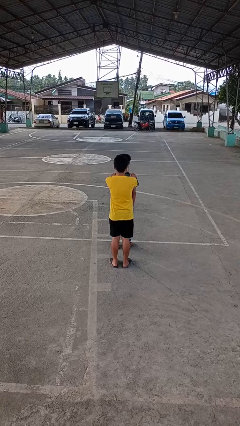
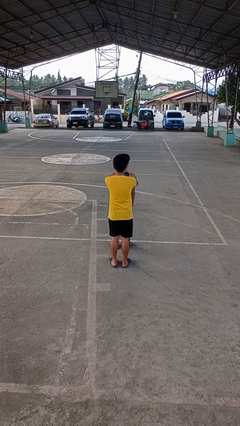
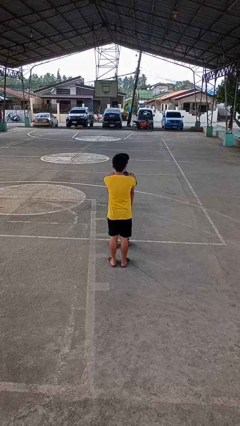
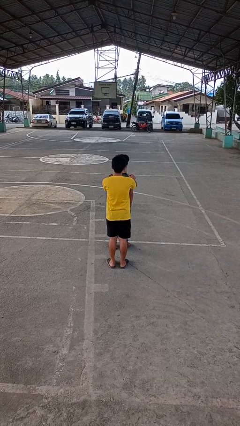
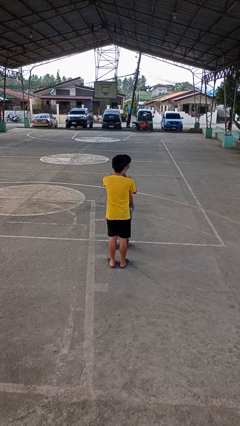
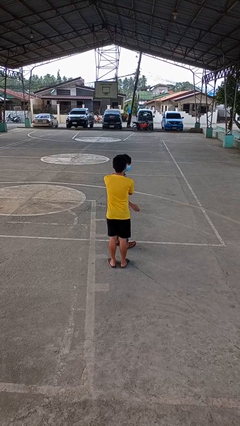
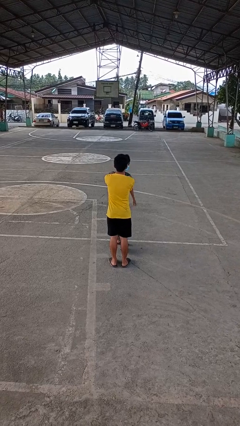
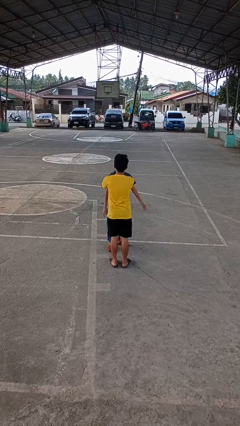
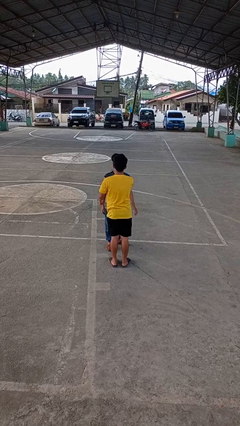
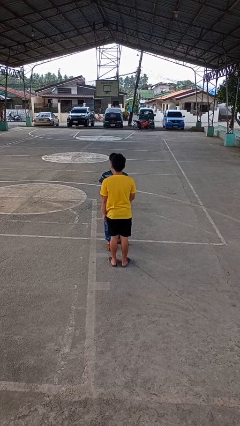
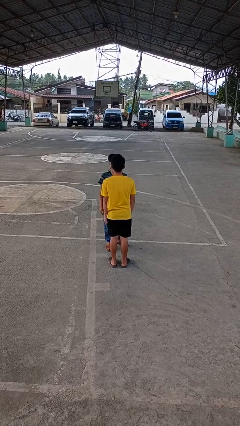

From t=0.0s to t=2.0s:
person spins person around

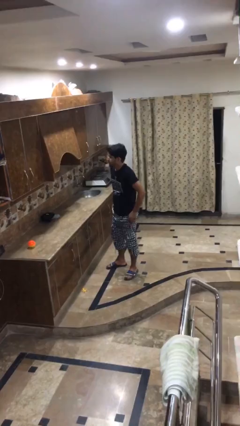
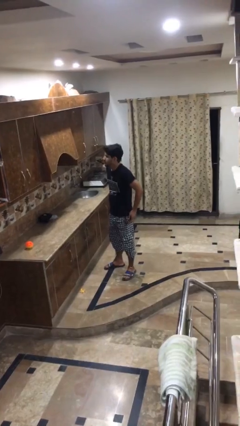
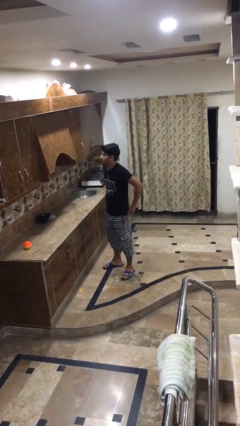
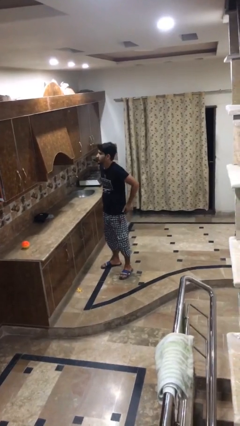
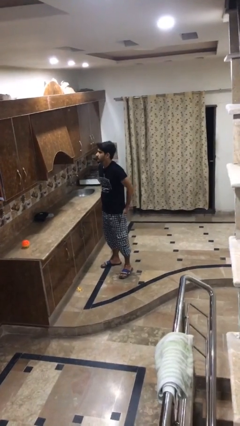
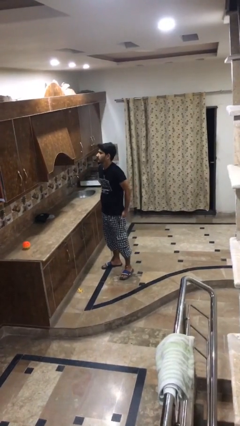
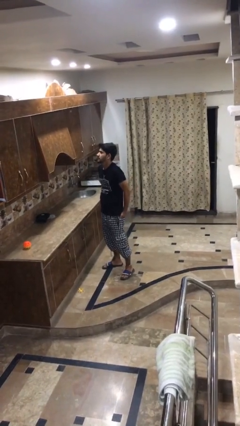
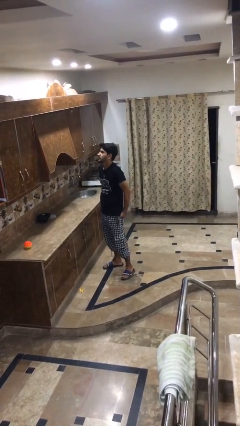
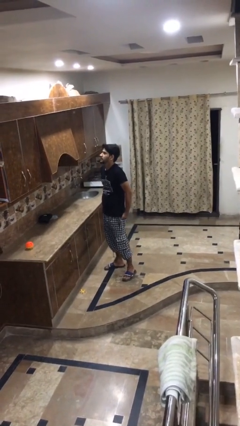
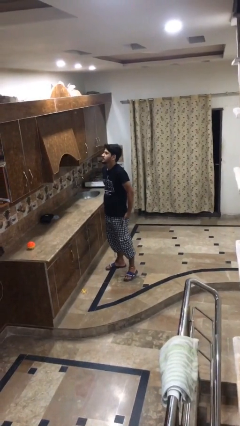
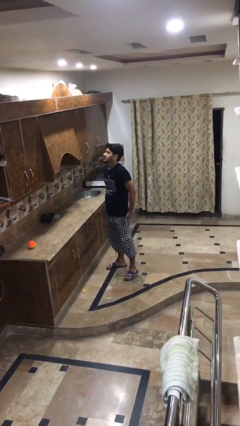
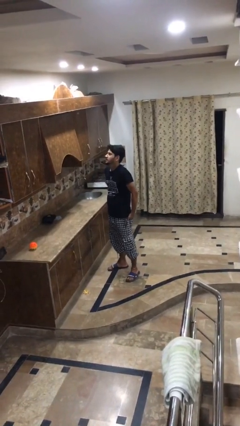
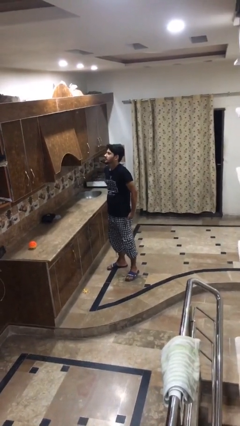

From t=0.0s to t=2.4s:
person puts hands in back pockets

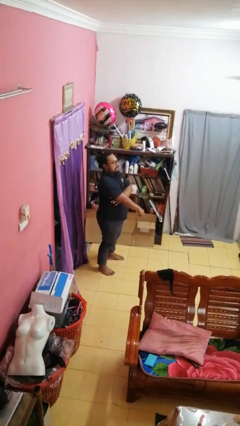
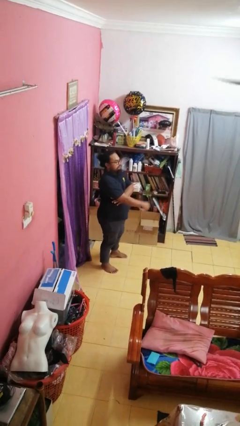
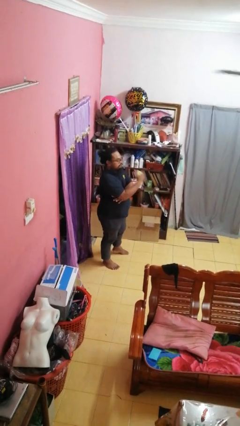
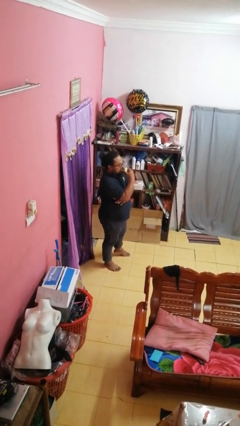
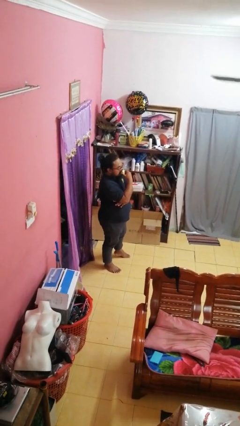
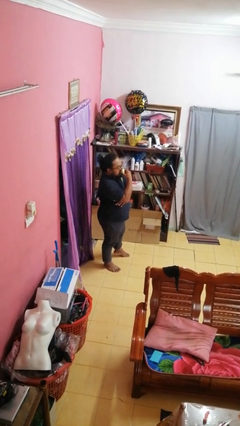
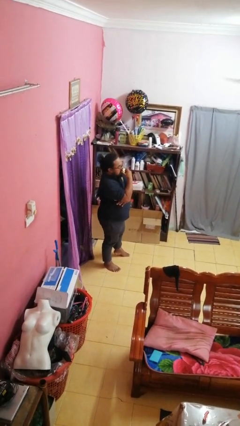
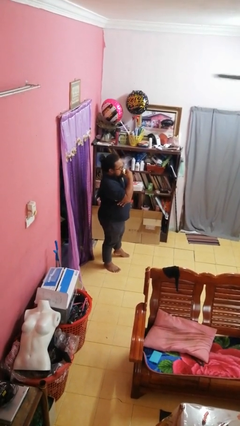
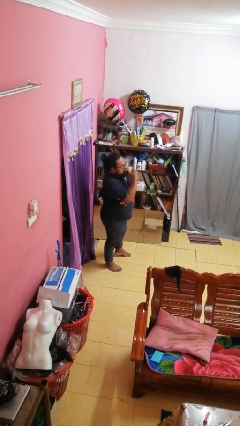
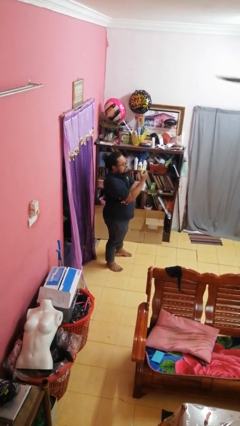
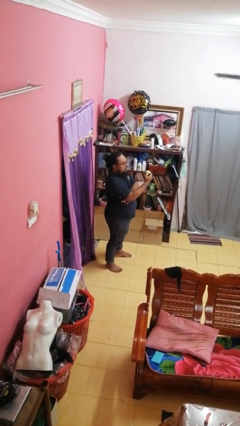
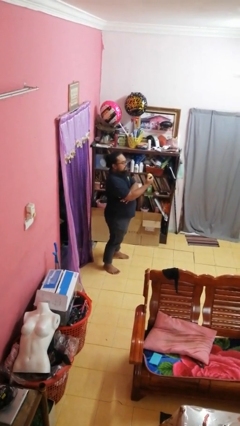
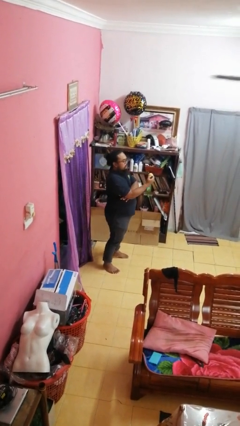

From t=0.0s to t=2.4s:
person eats apple

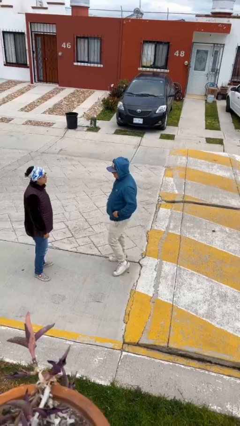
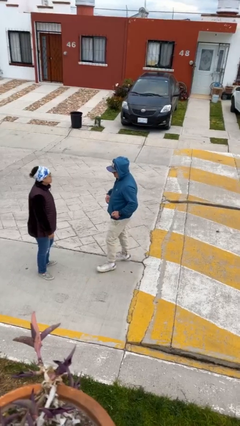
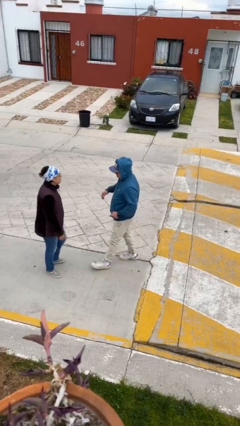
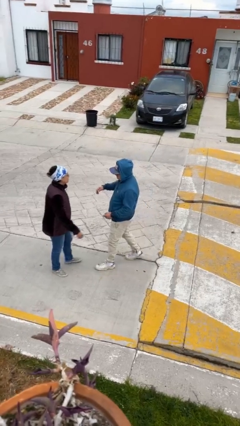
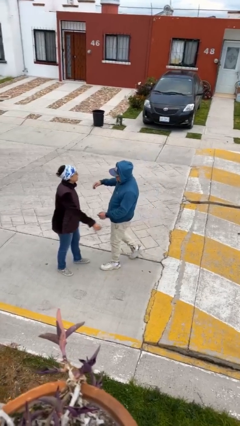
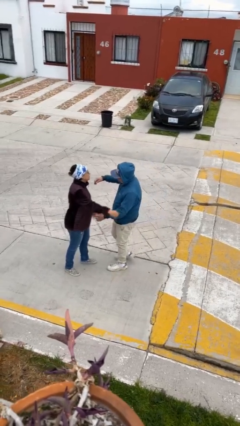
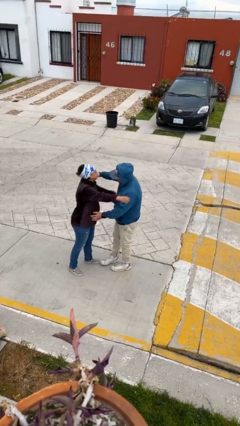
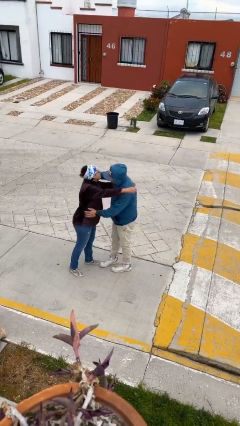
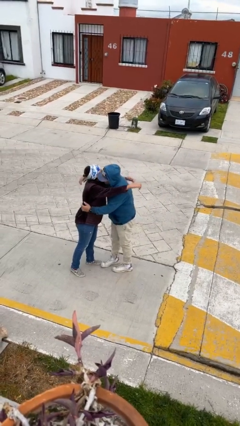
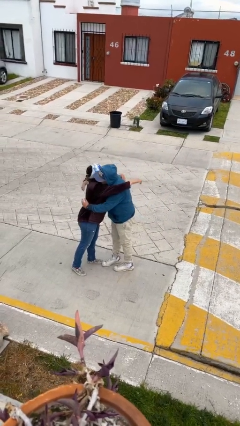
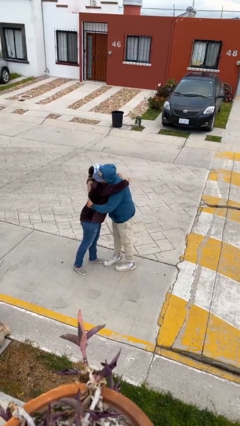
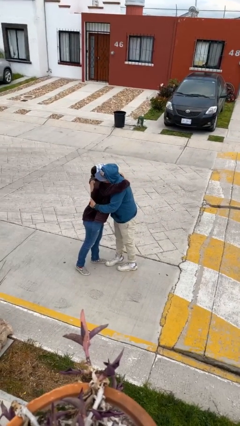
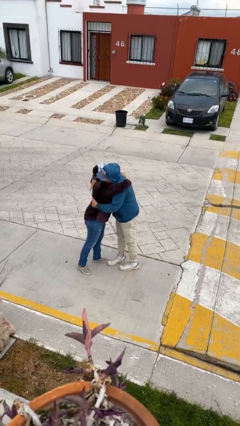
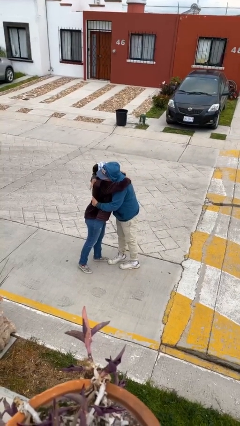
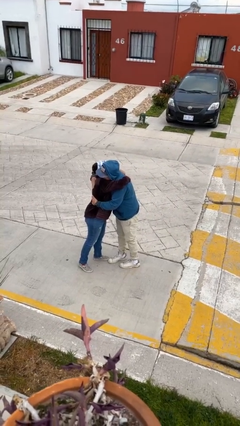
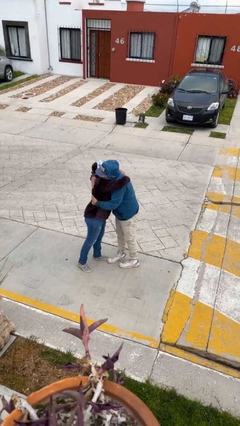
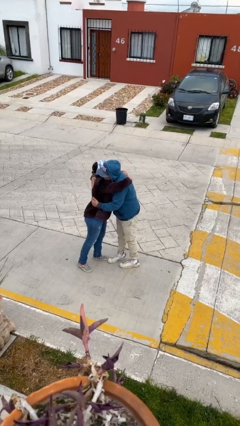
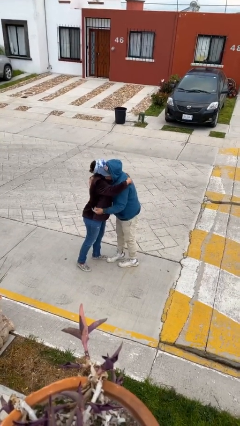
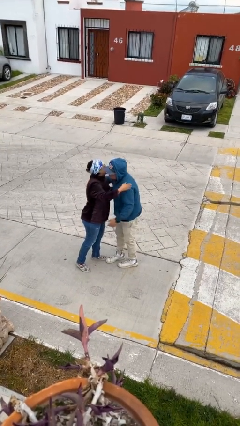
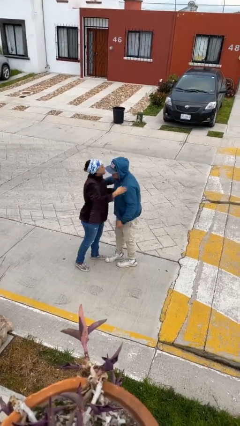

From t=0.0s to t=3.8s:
person embraces person

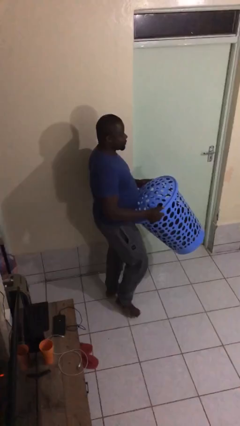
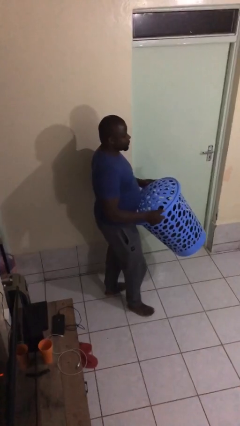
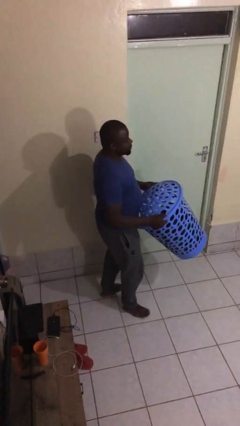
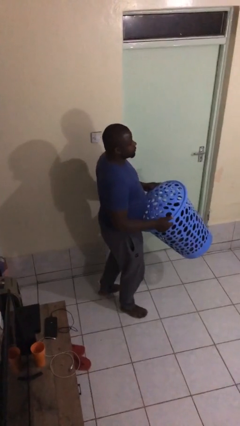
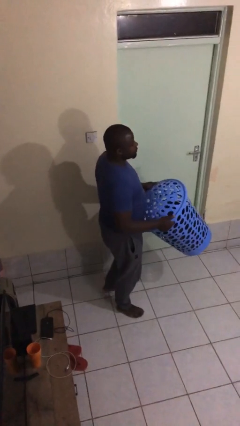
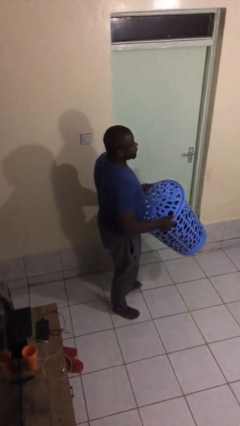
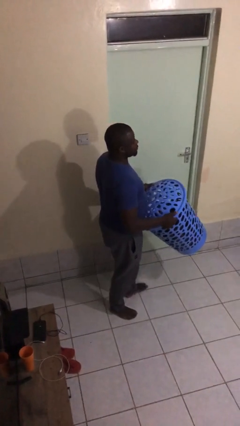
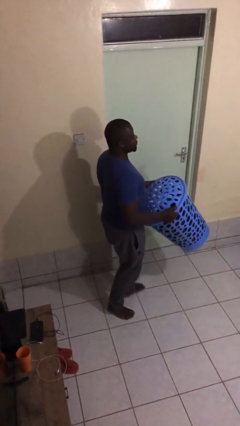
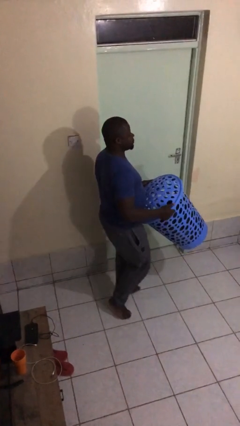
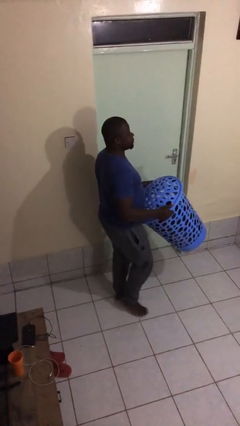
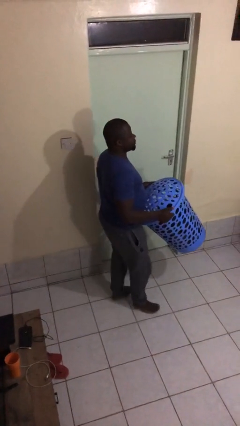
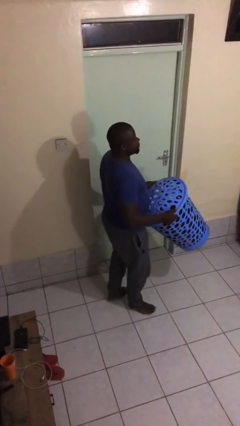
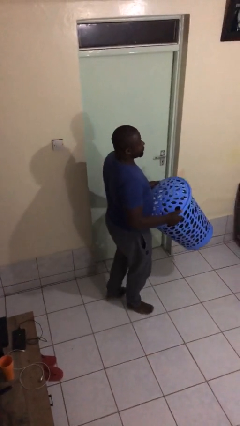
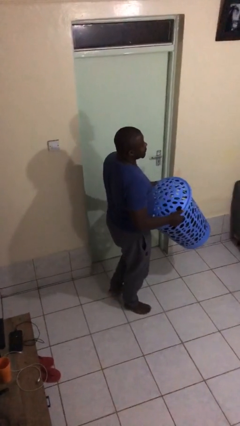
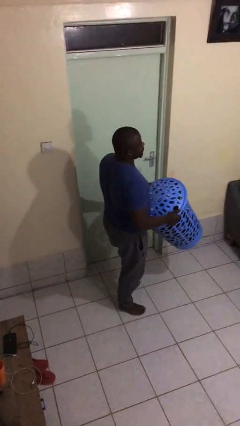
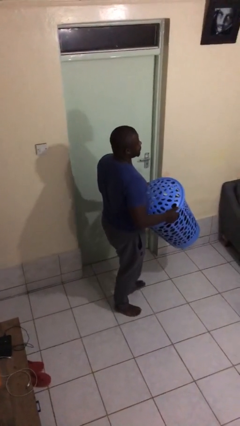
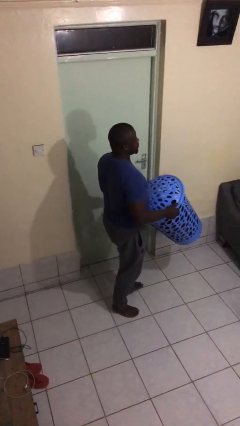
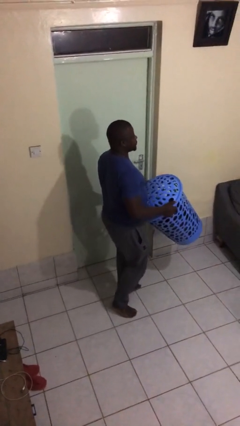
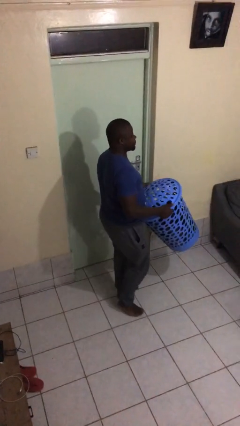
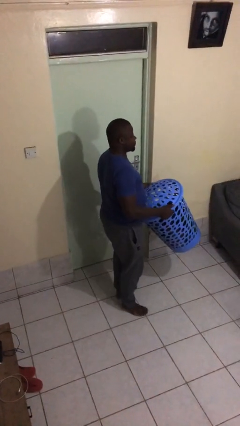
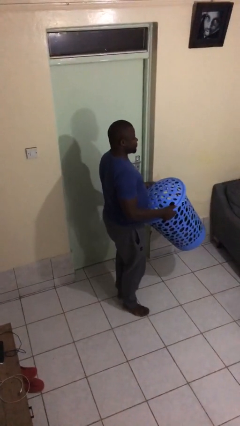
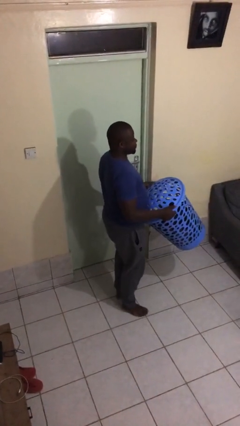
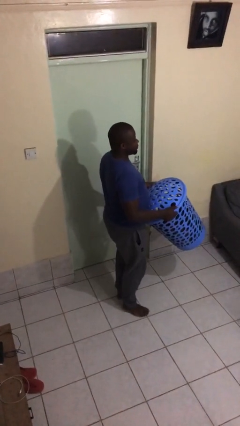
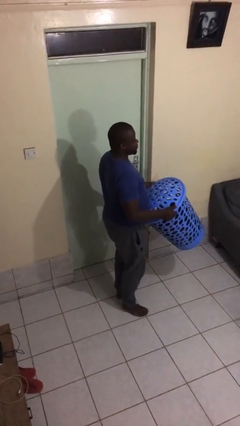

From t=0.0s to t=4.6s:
person carries laundry basket

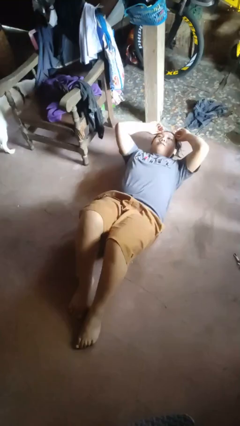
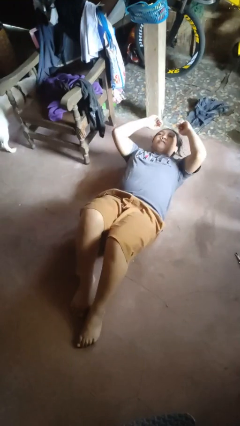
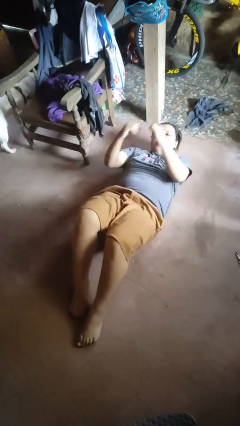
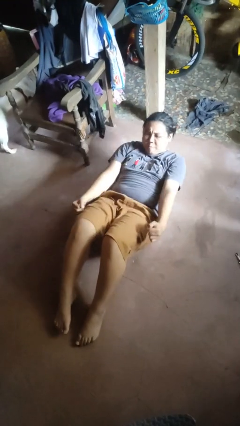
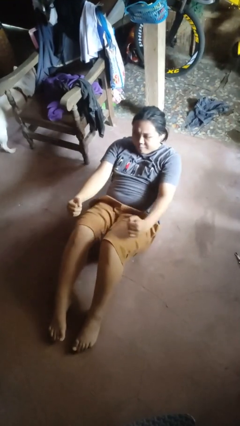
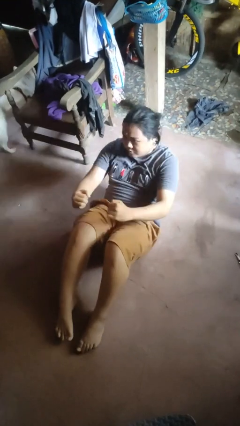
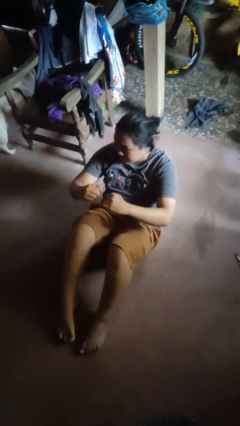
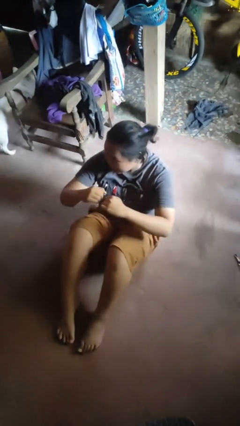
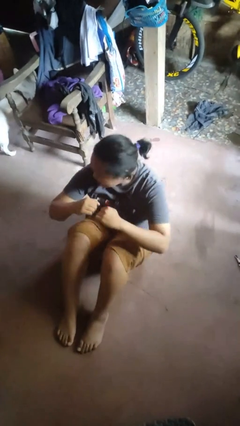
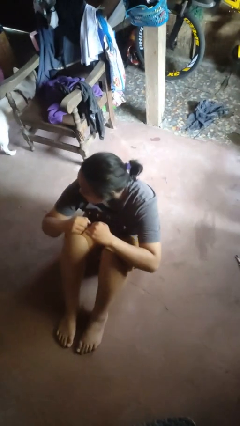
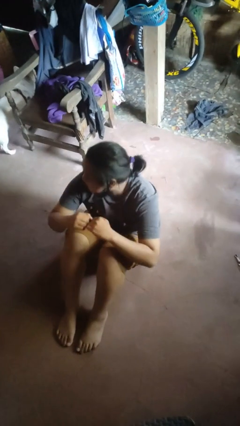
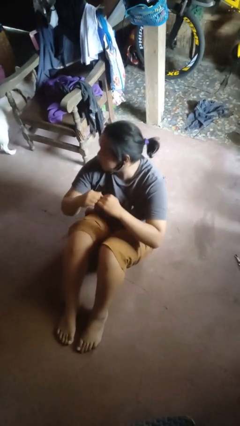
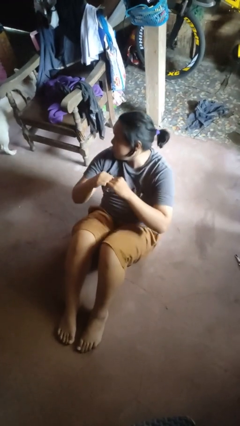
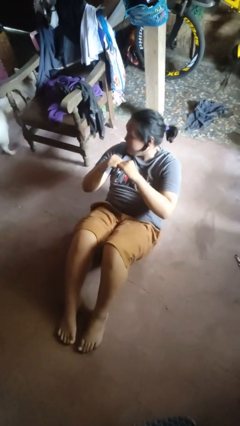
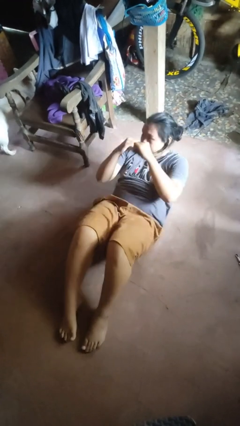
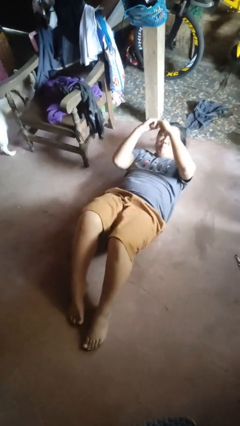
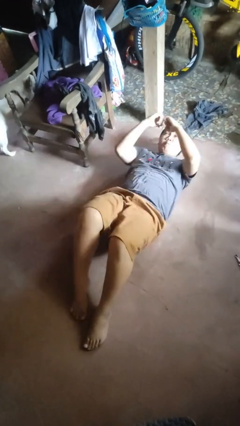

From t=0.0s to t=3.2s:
person exercises with situp
